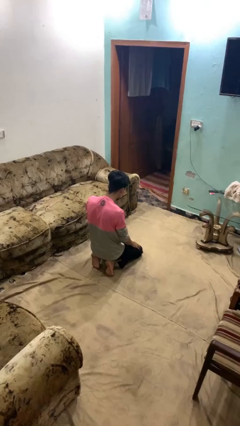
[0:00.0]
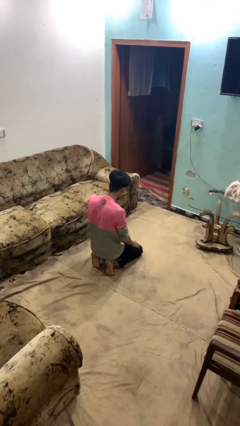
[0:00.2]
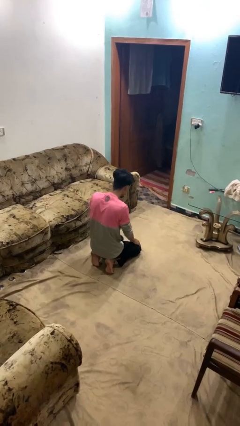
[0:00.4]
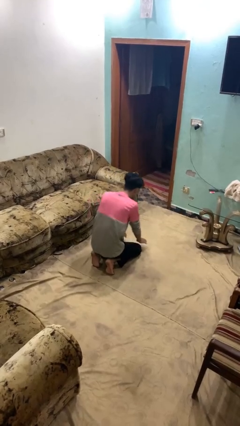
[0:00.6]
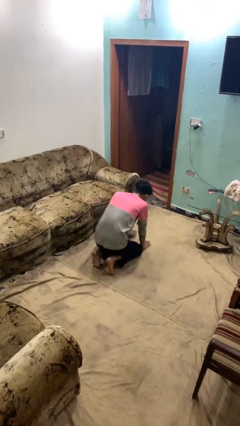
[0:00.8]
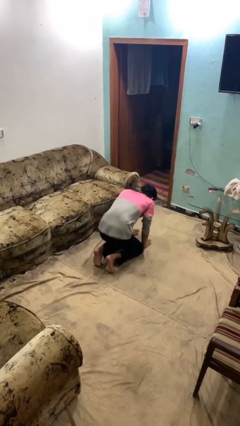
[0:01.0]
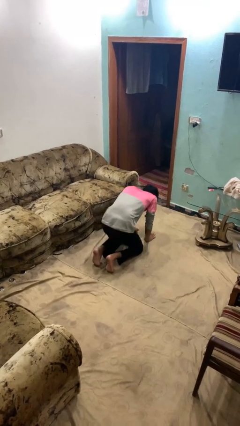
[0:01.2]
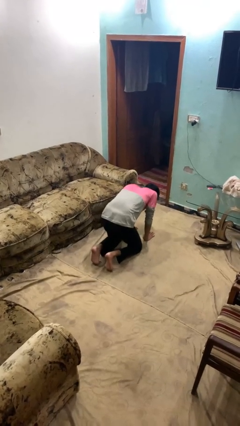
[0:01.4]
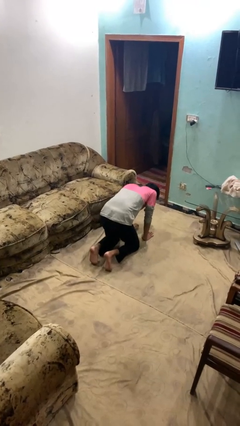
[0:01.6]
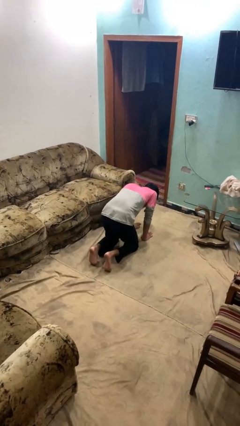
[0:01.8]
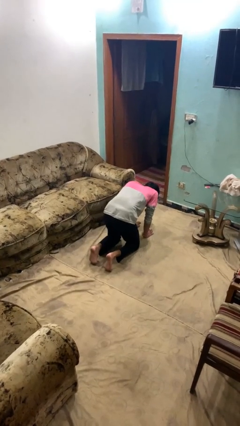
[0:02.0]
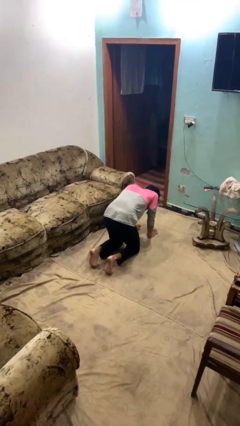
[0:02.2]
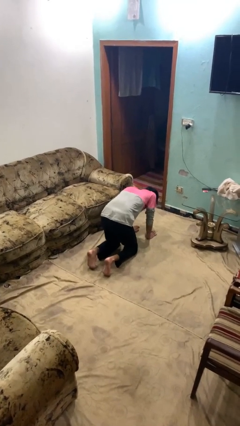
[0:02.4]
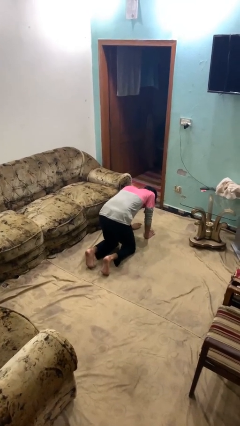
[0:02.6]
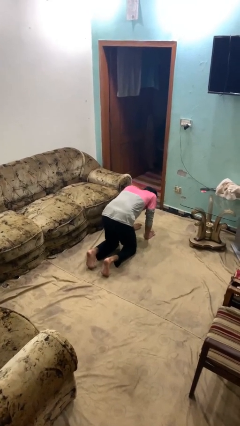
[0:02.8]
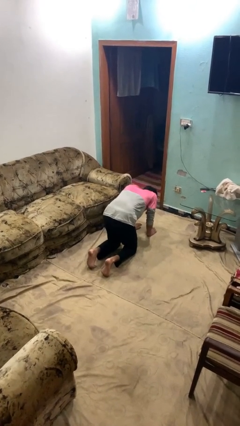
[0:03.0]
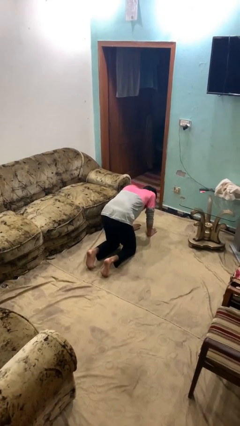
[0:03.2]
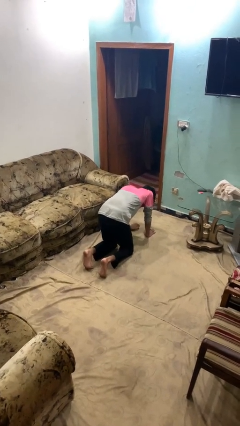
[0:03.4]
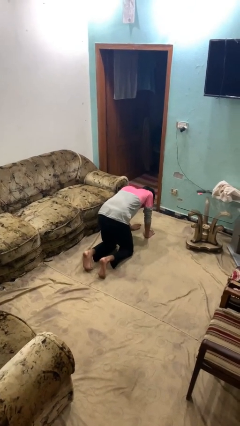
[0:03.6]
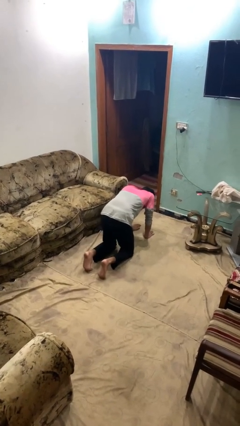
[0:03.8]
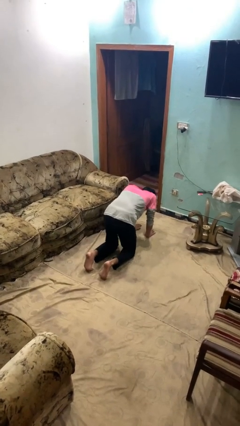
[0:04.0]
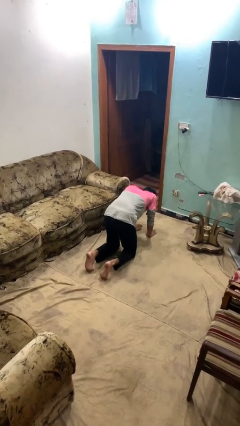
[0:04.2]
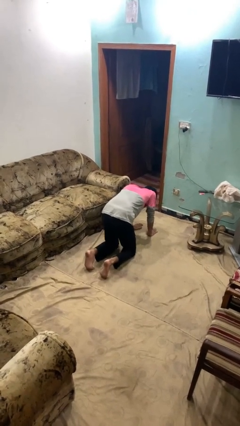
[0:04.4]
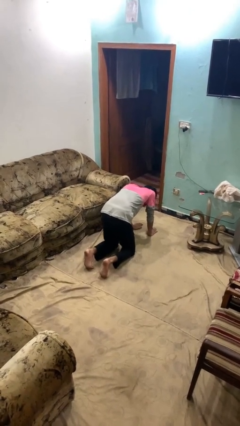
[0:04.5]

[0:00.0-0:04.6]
person crawls

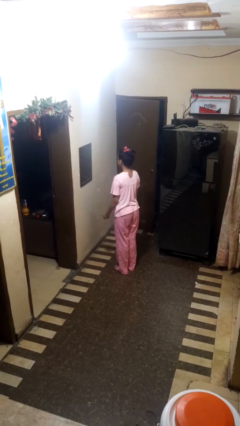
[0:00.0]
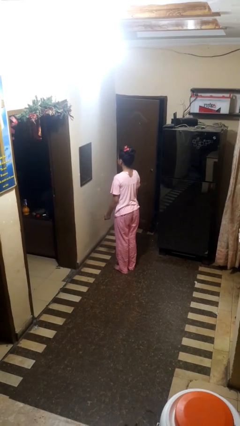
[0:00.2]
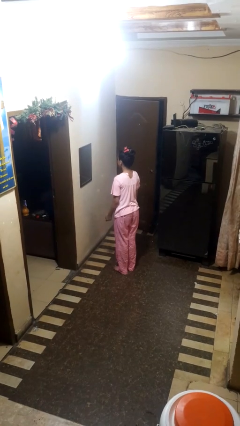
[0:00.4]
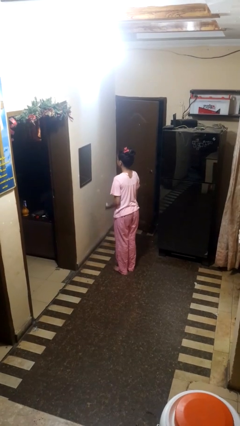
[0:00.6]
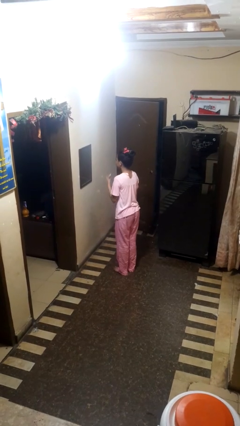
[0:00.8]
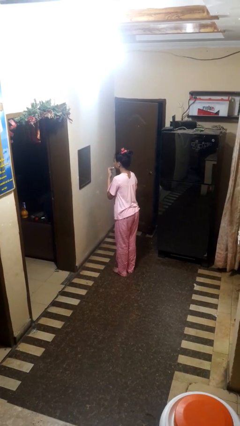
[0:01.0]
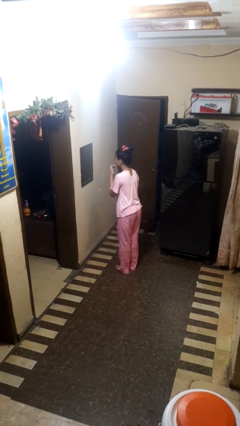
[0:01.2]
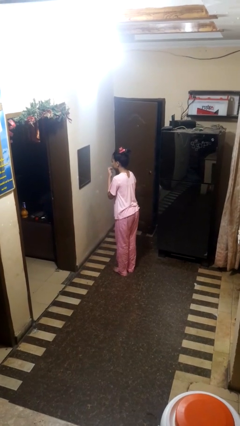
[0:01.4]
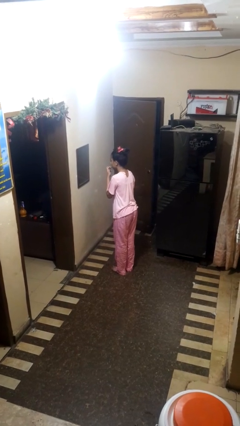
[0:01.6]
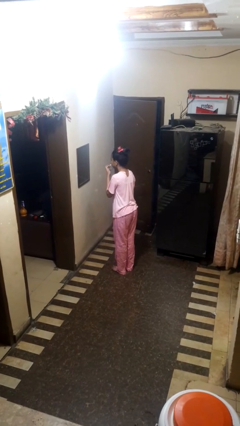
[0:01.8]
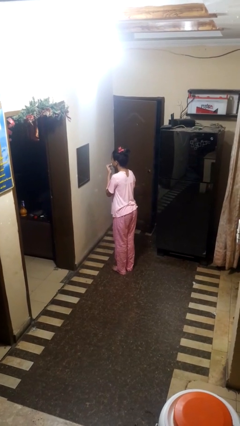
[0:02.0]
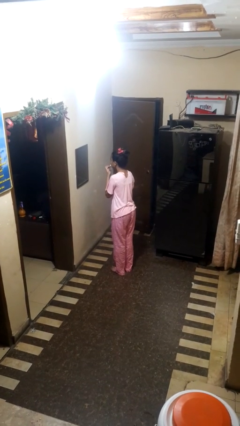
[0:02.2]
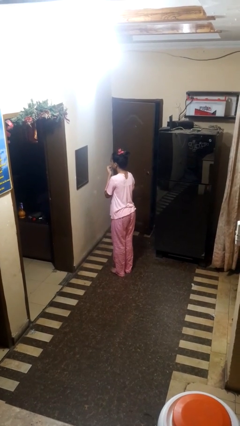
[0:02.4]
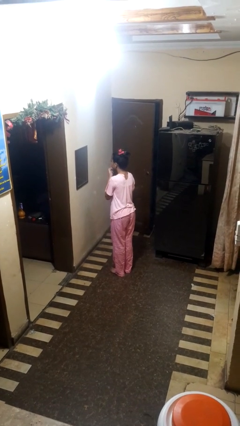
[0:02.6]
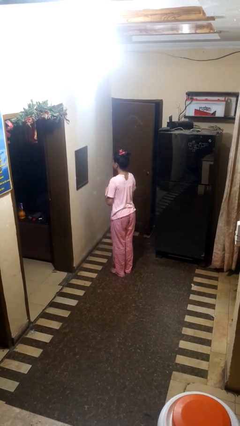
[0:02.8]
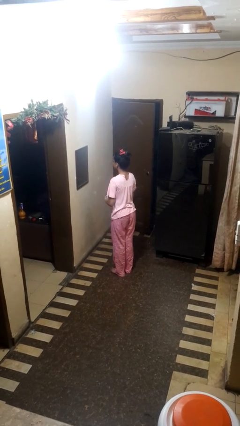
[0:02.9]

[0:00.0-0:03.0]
person applies lip makeup

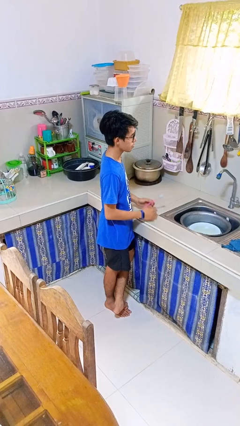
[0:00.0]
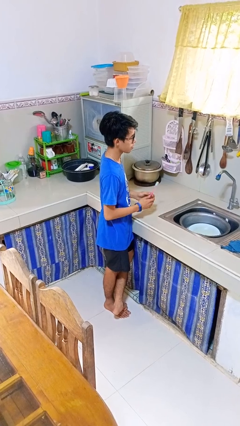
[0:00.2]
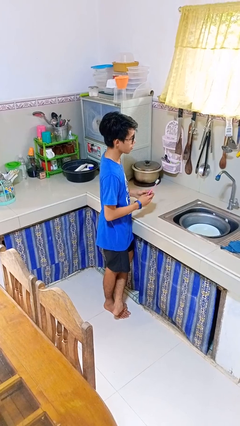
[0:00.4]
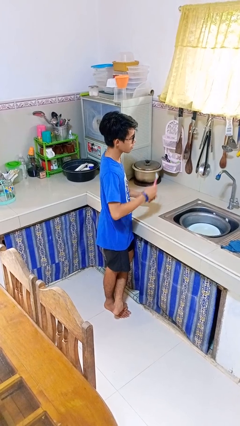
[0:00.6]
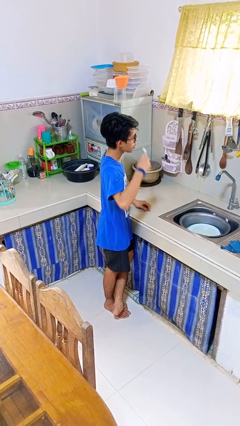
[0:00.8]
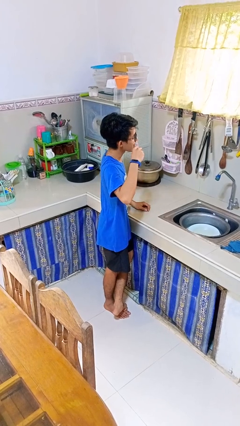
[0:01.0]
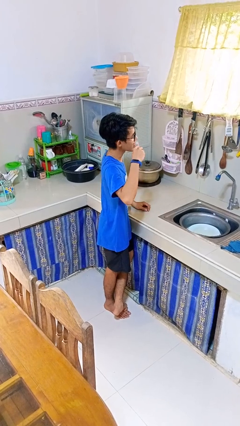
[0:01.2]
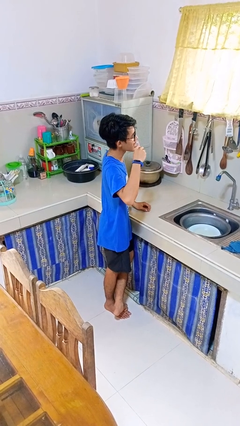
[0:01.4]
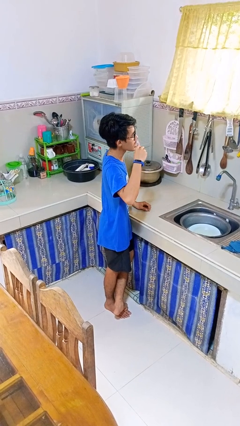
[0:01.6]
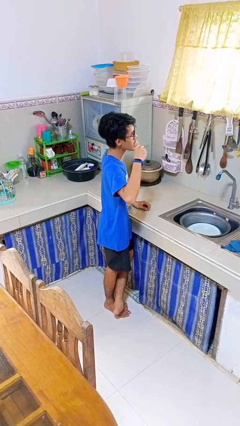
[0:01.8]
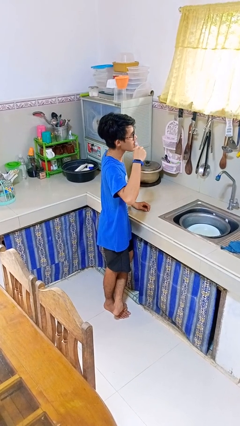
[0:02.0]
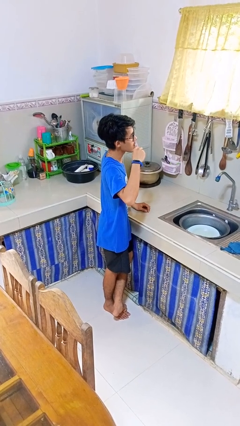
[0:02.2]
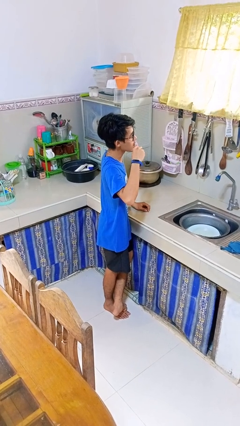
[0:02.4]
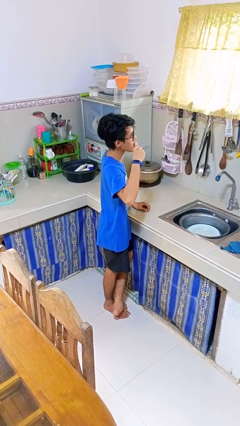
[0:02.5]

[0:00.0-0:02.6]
person brushes teeth

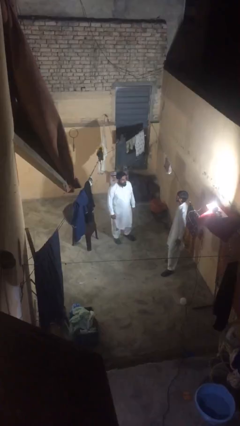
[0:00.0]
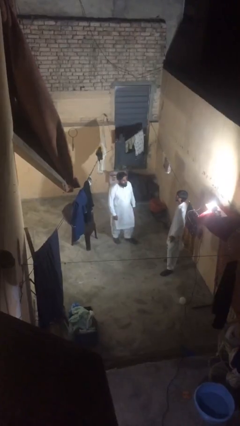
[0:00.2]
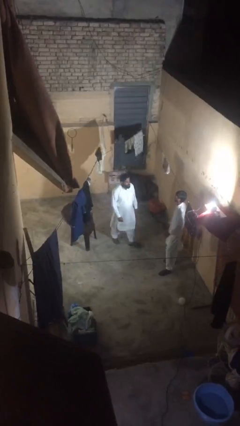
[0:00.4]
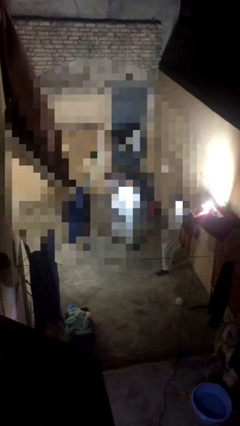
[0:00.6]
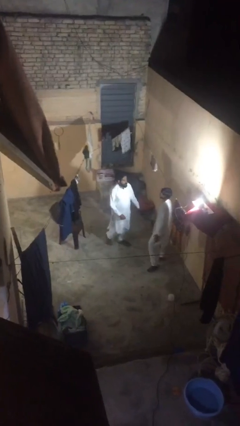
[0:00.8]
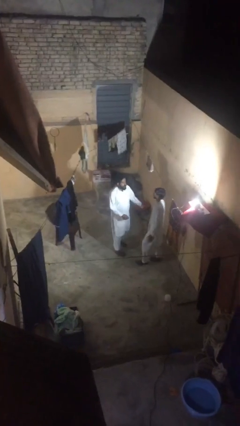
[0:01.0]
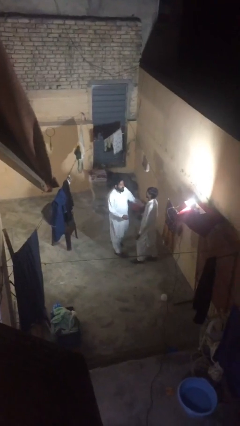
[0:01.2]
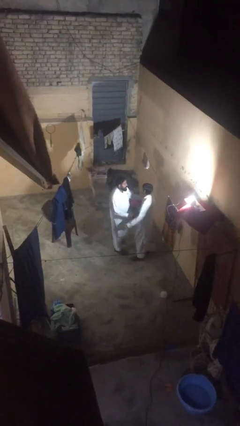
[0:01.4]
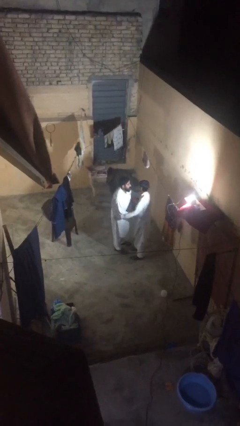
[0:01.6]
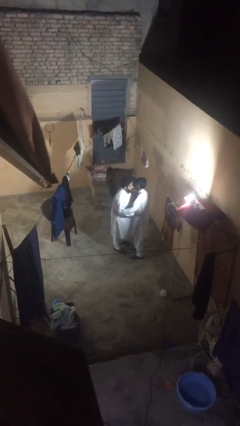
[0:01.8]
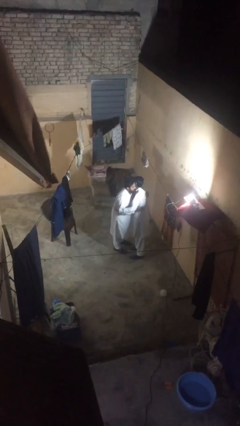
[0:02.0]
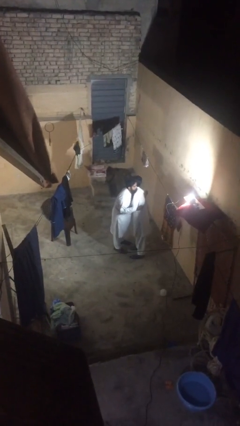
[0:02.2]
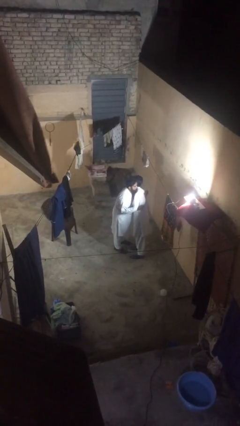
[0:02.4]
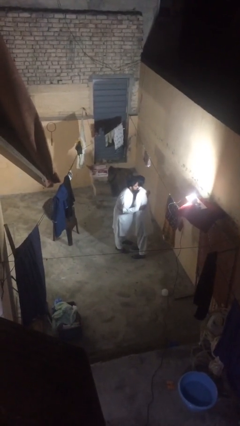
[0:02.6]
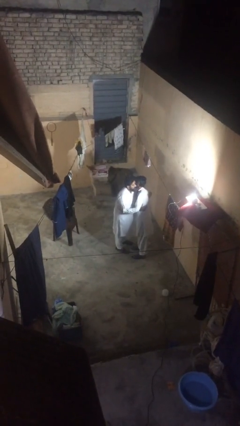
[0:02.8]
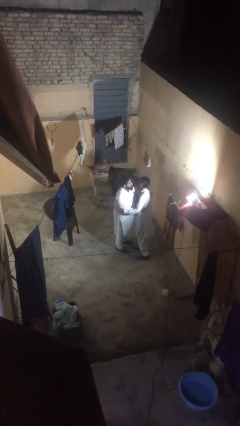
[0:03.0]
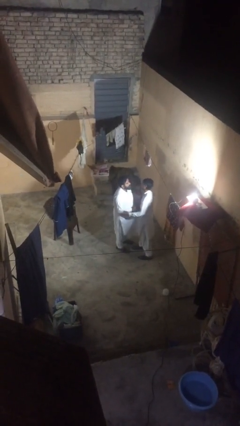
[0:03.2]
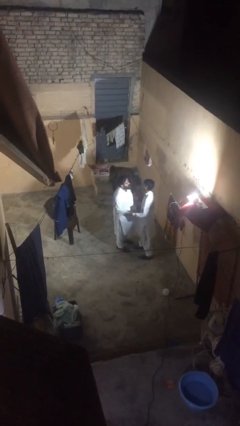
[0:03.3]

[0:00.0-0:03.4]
person embraces person

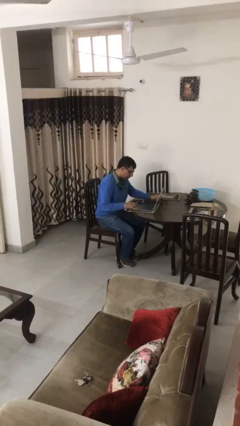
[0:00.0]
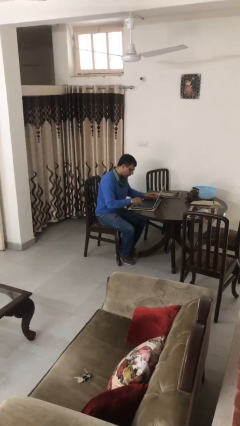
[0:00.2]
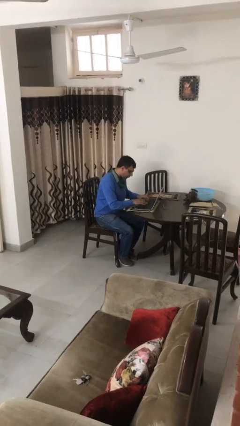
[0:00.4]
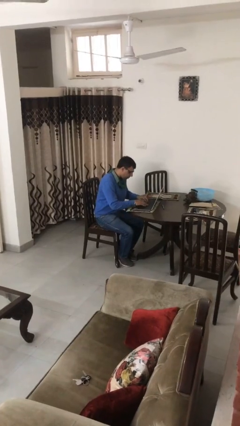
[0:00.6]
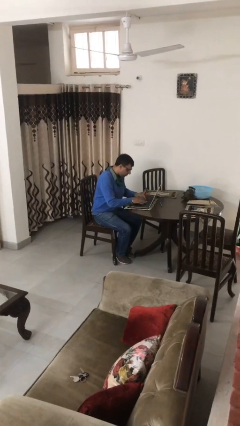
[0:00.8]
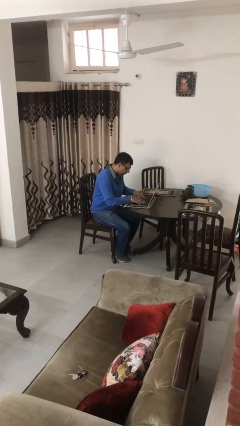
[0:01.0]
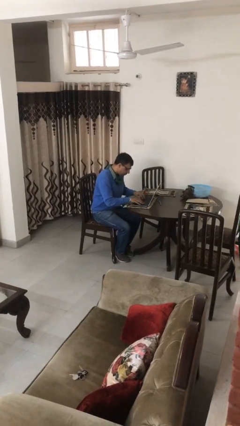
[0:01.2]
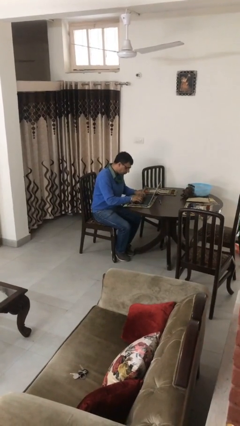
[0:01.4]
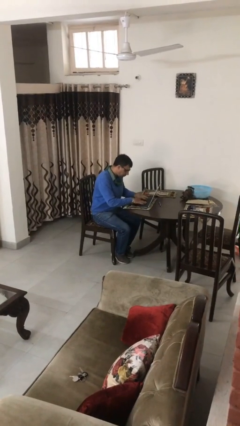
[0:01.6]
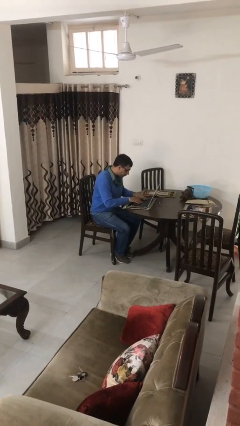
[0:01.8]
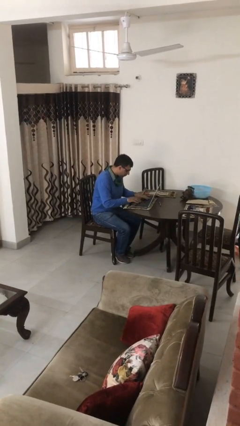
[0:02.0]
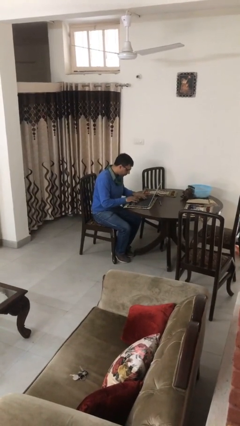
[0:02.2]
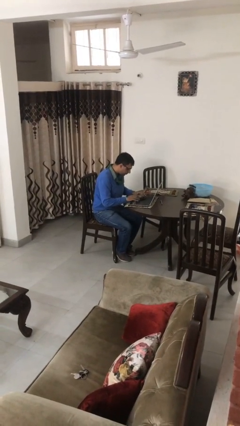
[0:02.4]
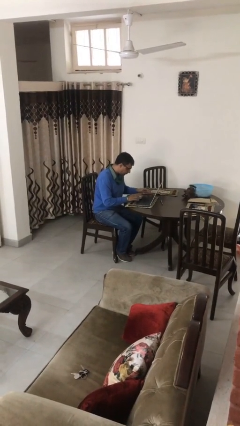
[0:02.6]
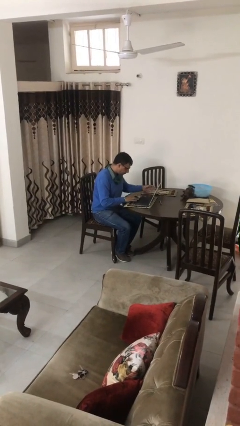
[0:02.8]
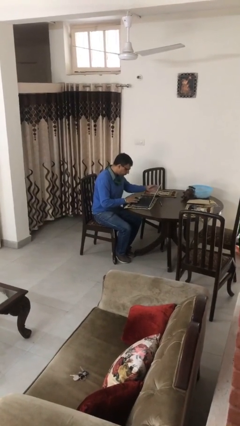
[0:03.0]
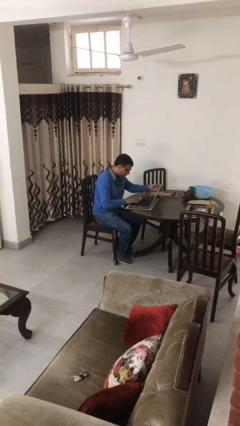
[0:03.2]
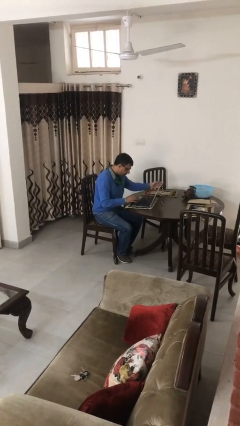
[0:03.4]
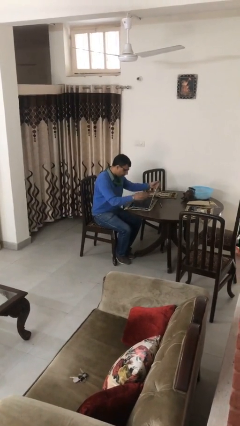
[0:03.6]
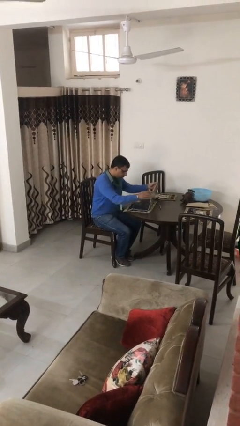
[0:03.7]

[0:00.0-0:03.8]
person interacts with laptop

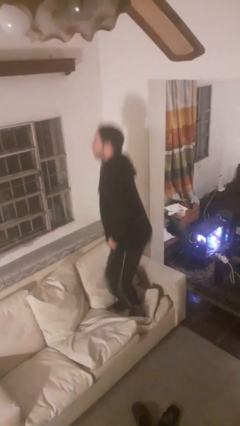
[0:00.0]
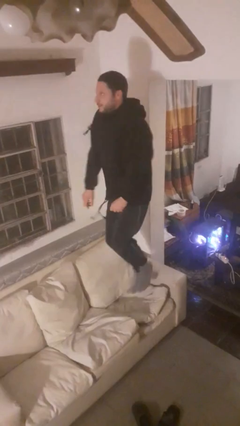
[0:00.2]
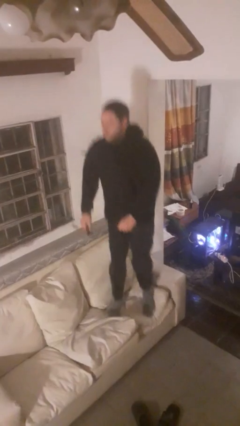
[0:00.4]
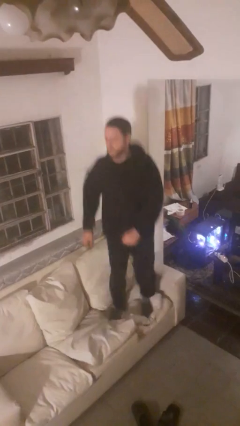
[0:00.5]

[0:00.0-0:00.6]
person jumps on couch
